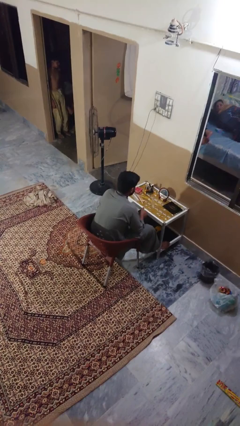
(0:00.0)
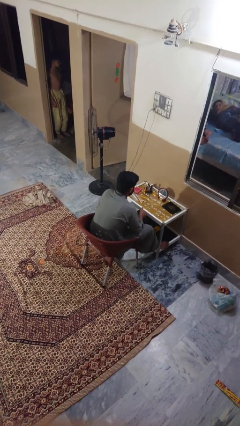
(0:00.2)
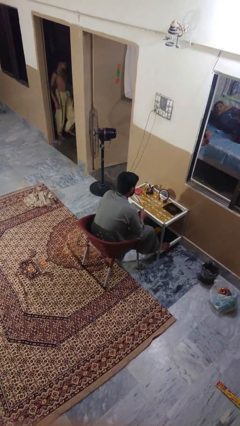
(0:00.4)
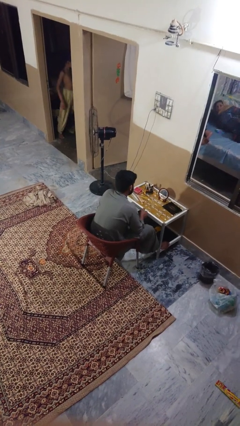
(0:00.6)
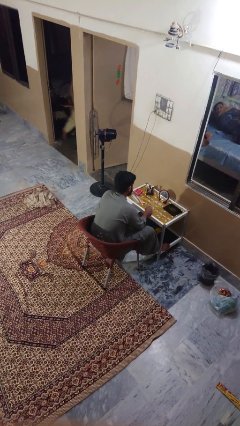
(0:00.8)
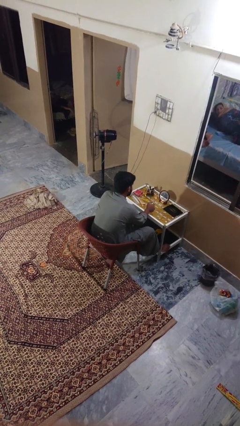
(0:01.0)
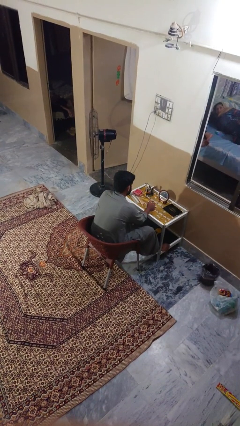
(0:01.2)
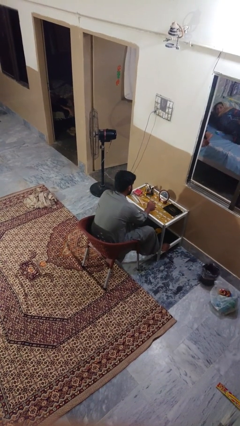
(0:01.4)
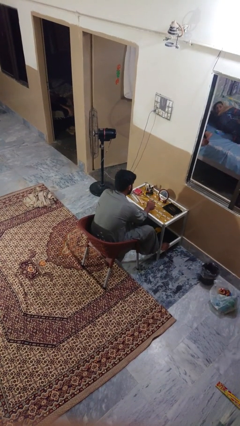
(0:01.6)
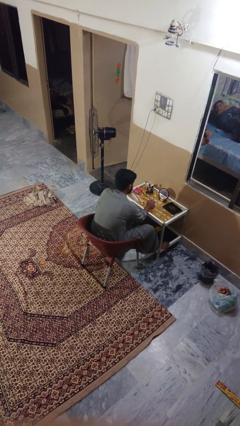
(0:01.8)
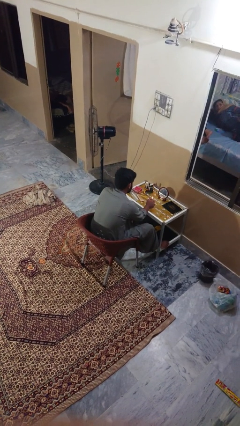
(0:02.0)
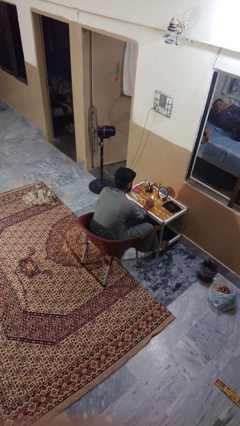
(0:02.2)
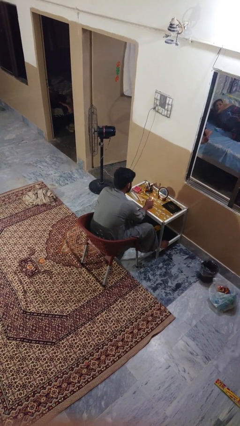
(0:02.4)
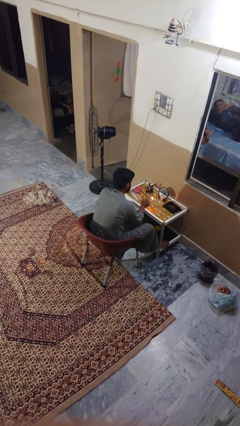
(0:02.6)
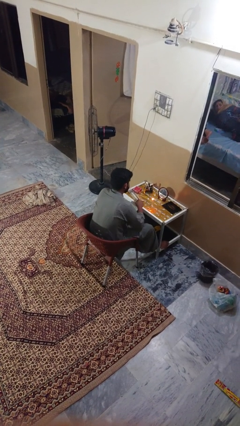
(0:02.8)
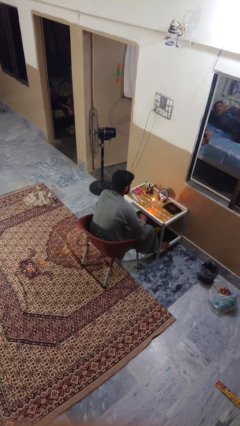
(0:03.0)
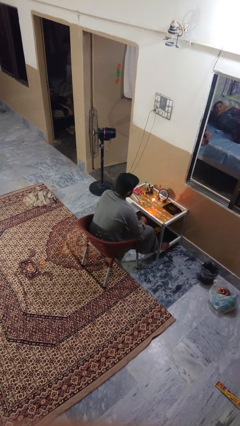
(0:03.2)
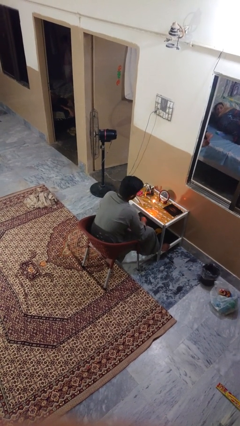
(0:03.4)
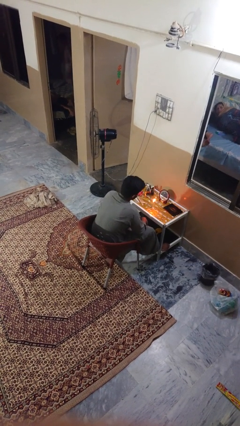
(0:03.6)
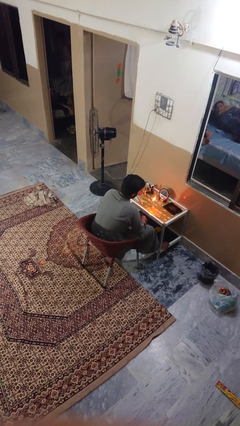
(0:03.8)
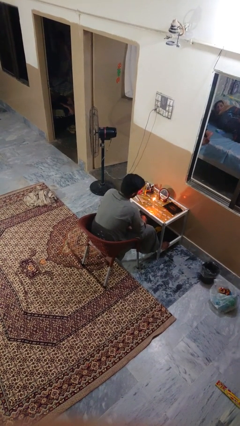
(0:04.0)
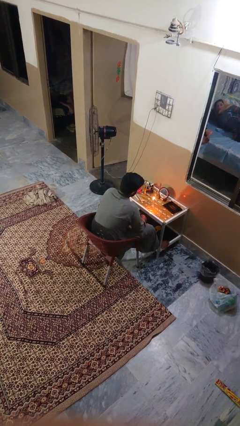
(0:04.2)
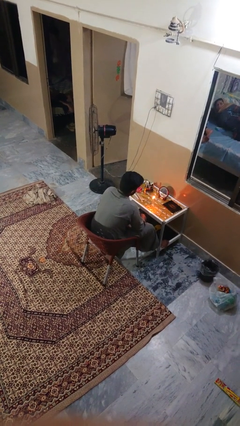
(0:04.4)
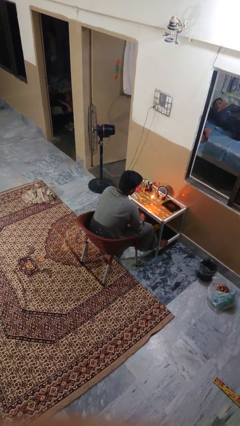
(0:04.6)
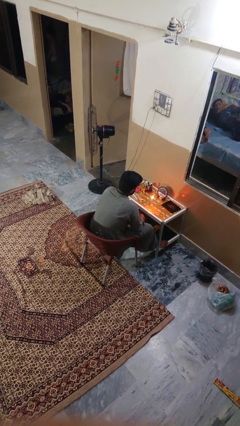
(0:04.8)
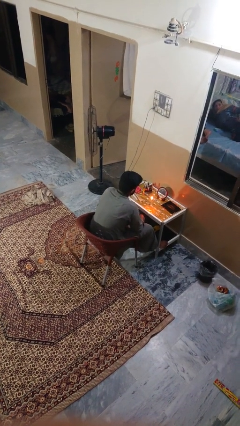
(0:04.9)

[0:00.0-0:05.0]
person lights candle

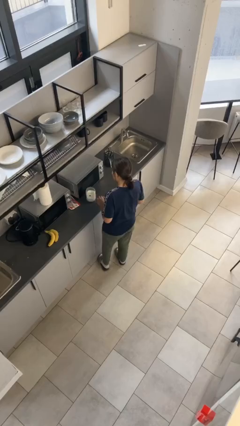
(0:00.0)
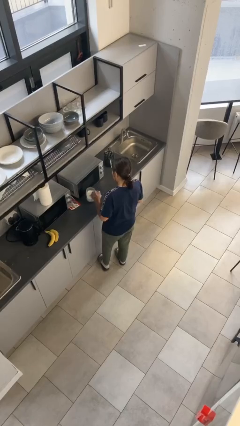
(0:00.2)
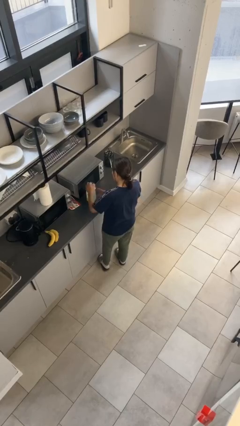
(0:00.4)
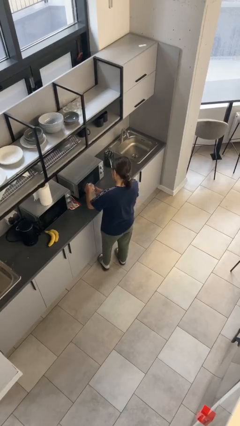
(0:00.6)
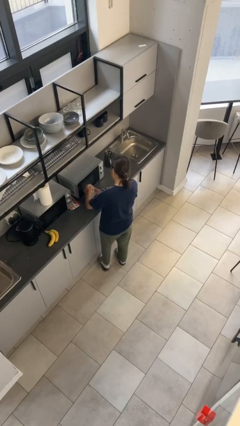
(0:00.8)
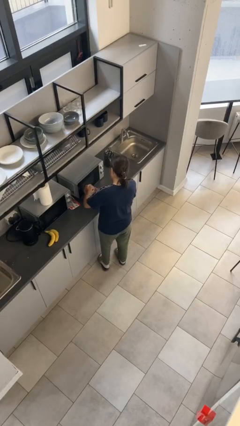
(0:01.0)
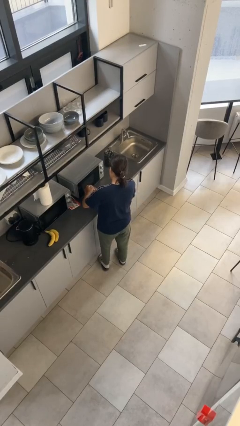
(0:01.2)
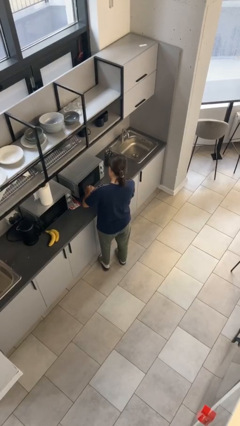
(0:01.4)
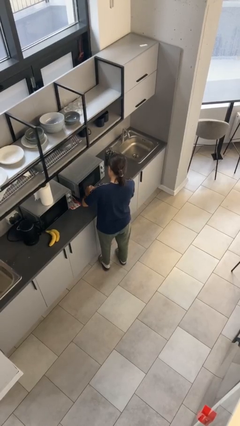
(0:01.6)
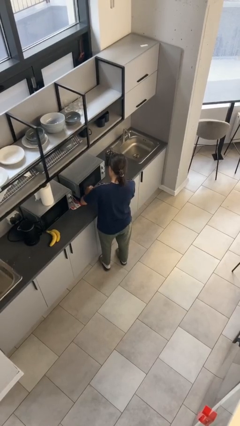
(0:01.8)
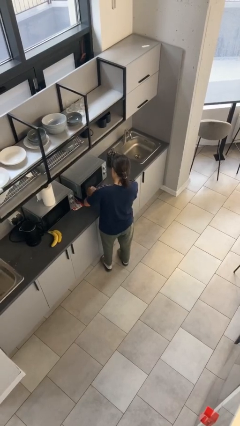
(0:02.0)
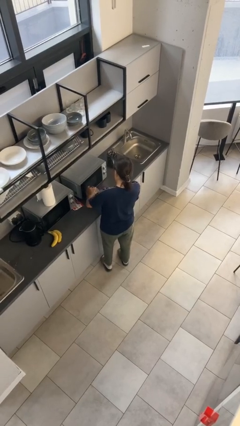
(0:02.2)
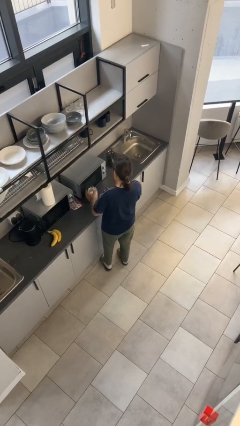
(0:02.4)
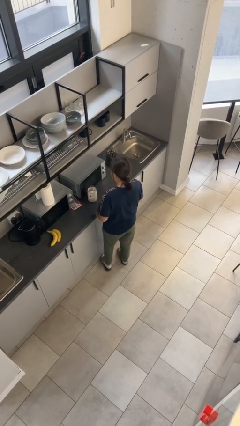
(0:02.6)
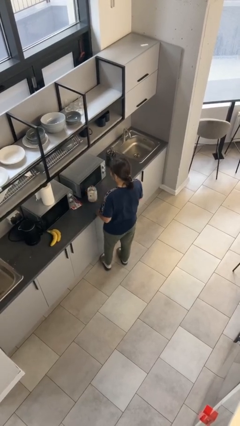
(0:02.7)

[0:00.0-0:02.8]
person closes jar

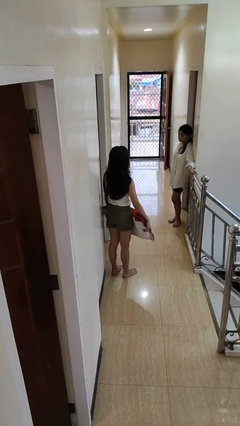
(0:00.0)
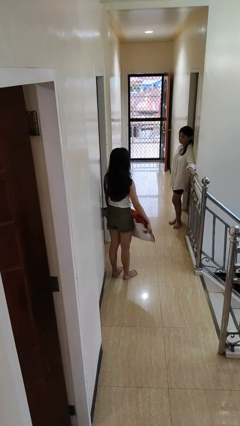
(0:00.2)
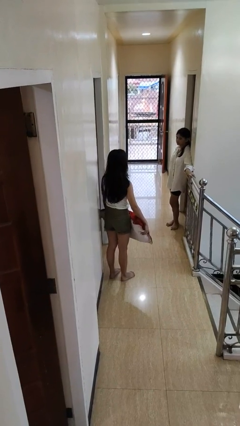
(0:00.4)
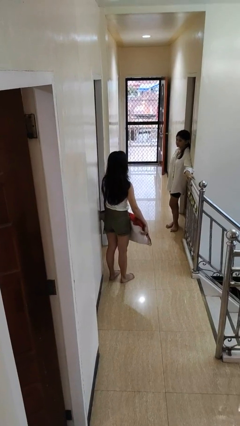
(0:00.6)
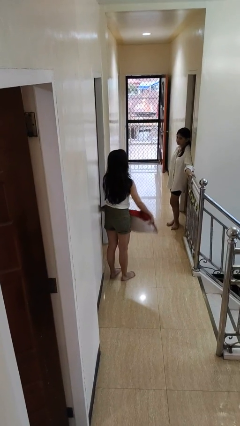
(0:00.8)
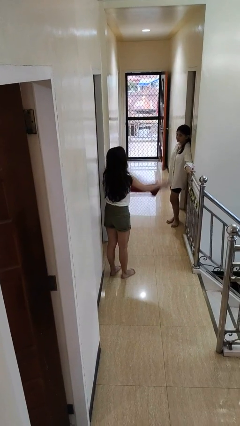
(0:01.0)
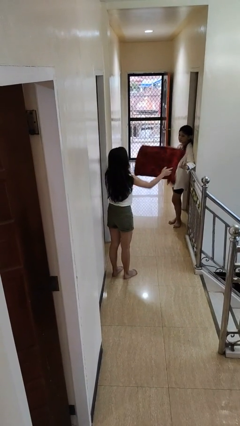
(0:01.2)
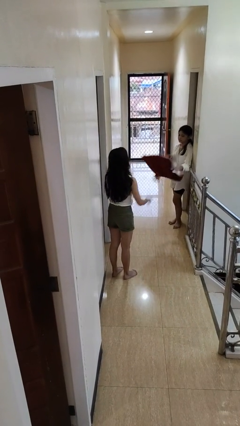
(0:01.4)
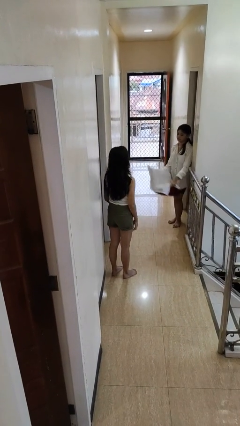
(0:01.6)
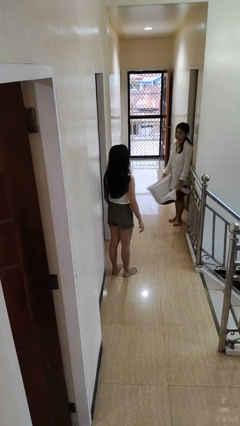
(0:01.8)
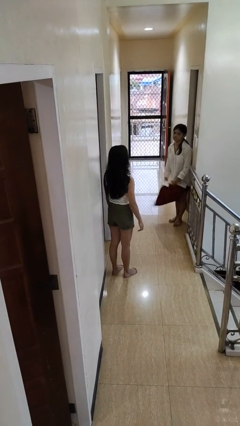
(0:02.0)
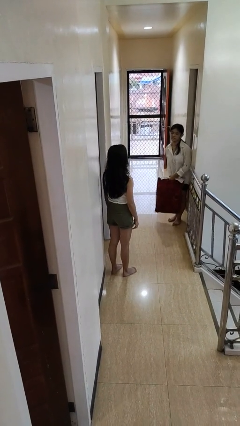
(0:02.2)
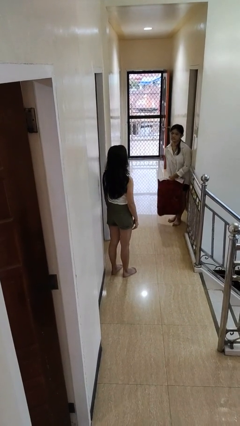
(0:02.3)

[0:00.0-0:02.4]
person throws object to person

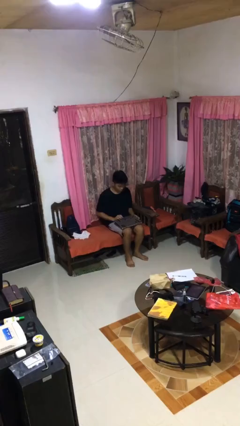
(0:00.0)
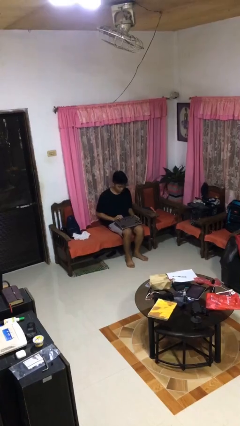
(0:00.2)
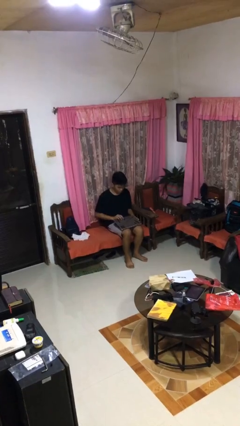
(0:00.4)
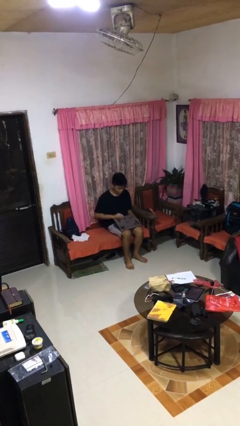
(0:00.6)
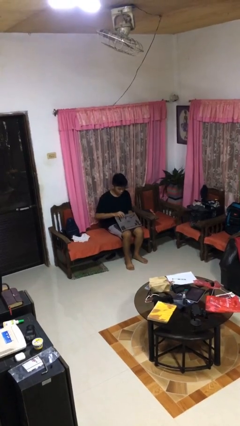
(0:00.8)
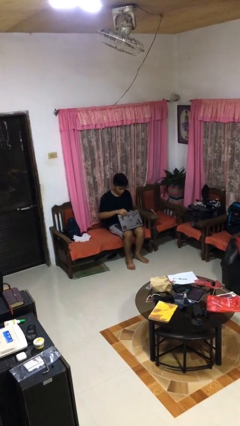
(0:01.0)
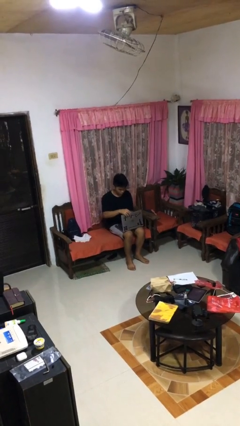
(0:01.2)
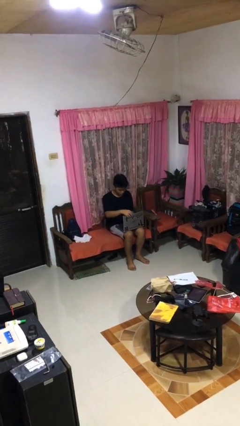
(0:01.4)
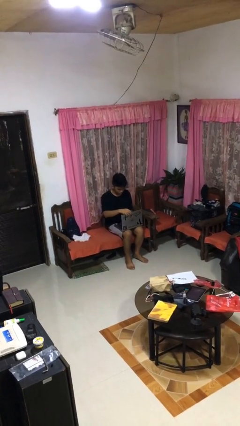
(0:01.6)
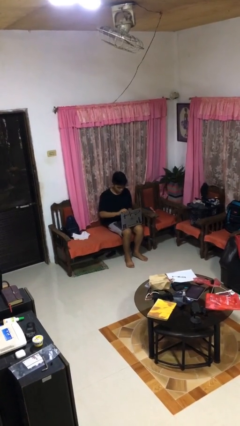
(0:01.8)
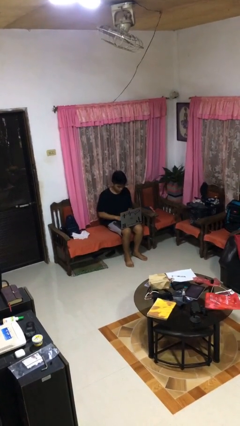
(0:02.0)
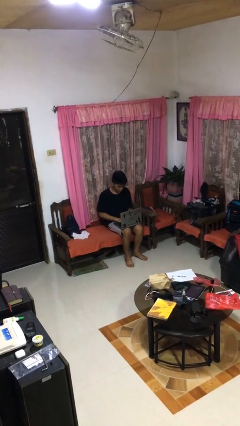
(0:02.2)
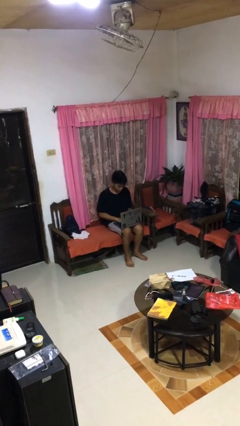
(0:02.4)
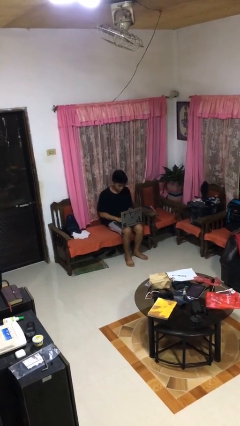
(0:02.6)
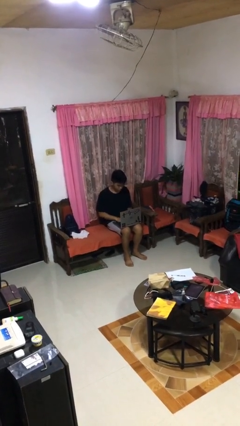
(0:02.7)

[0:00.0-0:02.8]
person opens laptop

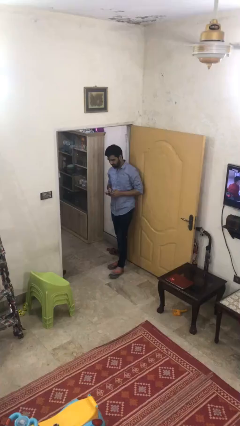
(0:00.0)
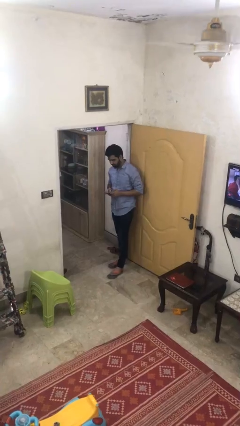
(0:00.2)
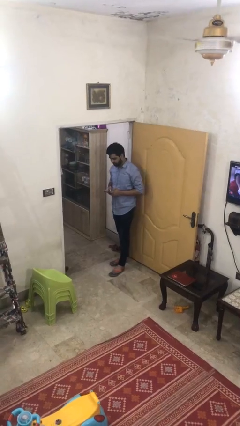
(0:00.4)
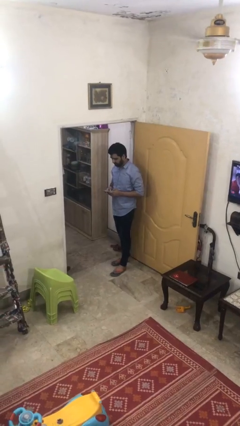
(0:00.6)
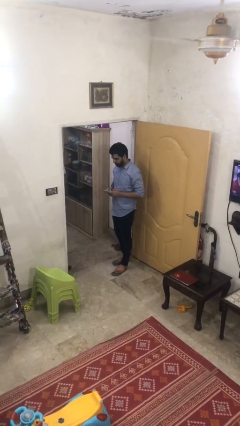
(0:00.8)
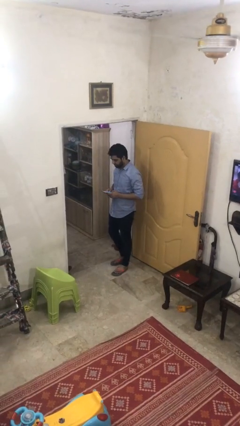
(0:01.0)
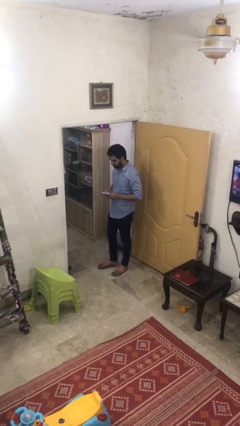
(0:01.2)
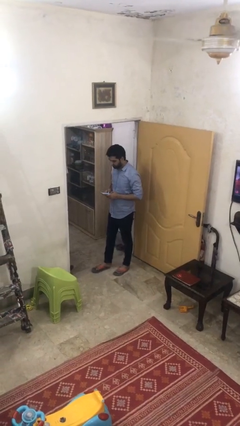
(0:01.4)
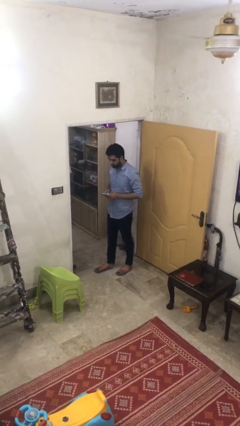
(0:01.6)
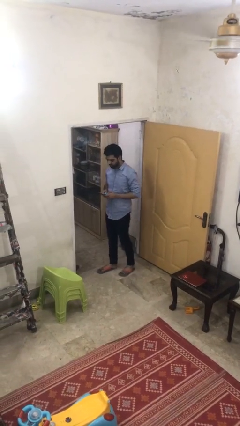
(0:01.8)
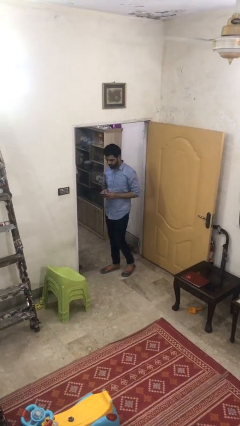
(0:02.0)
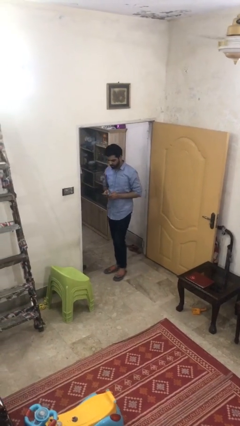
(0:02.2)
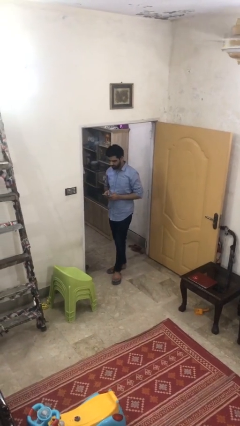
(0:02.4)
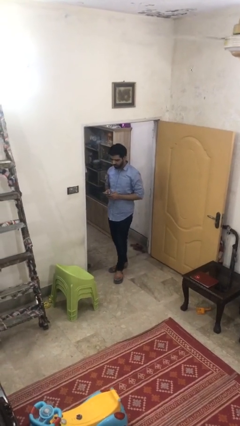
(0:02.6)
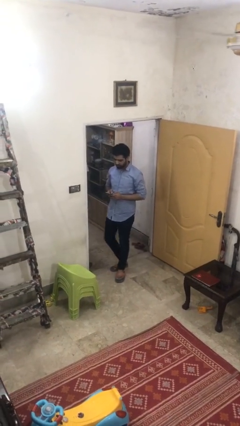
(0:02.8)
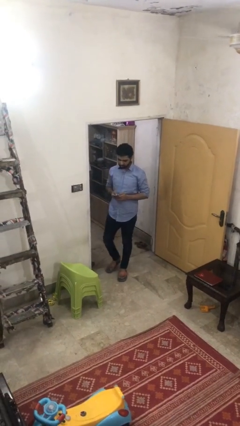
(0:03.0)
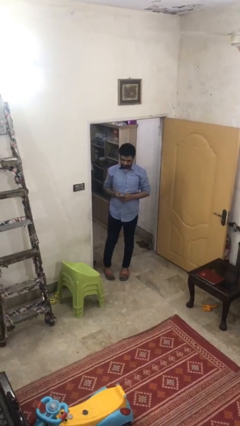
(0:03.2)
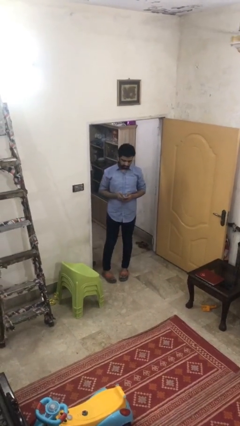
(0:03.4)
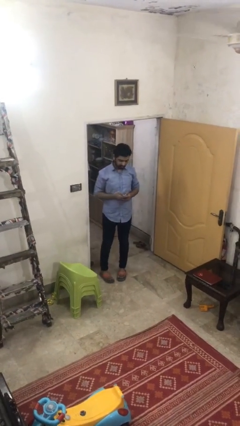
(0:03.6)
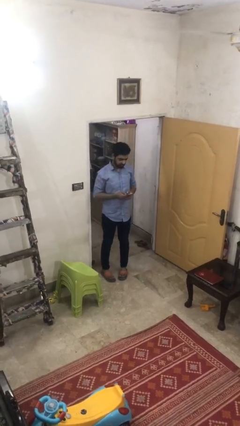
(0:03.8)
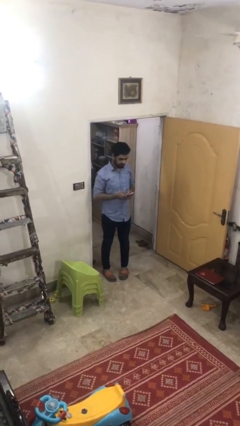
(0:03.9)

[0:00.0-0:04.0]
person texts on phone

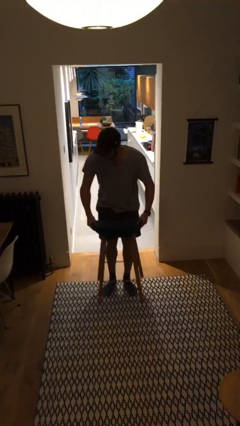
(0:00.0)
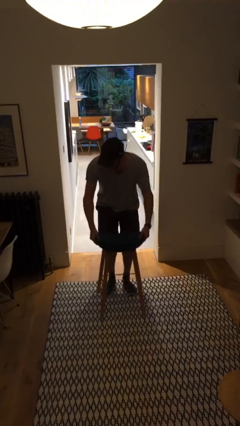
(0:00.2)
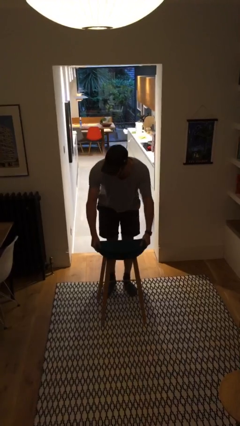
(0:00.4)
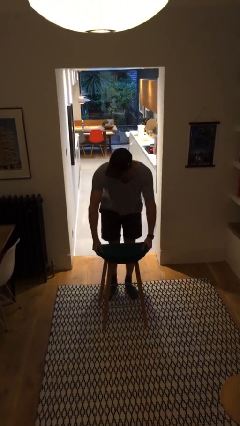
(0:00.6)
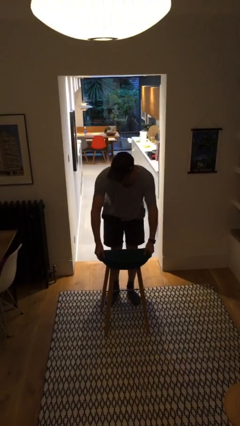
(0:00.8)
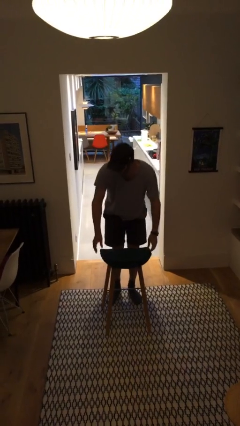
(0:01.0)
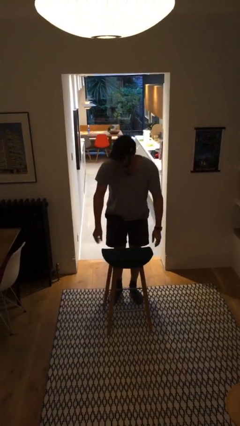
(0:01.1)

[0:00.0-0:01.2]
person puts down object on floor
